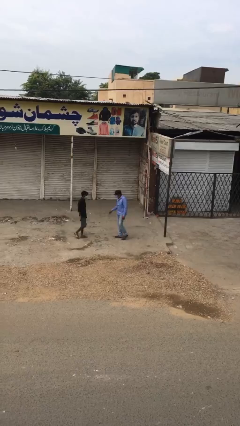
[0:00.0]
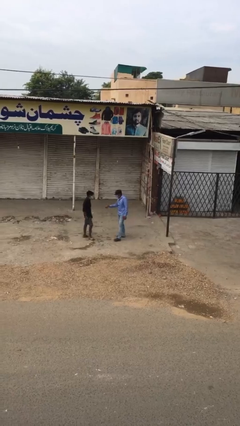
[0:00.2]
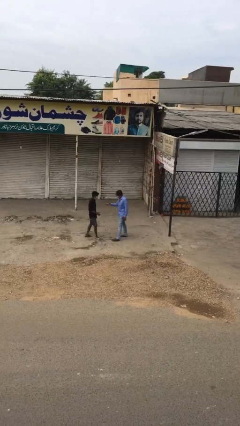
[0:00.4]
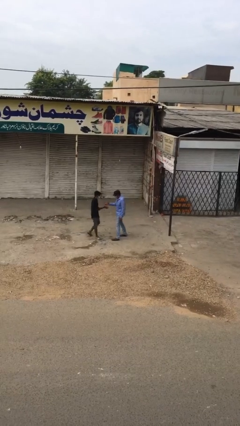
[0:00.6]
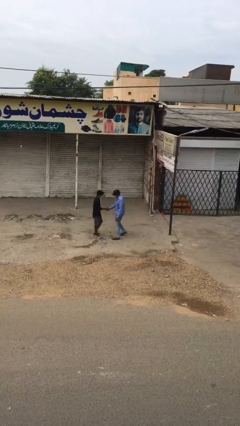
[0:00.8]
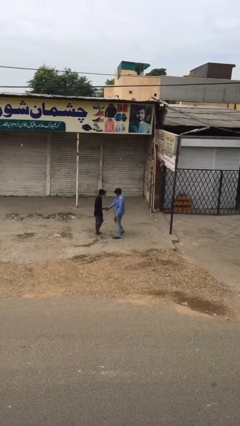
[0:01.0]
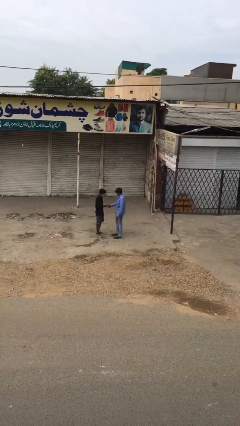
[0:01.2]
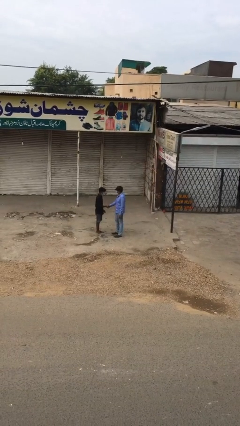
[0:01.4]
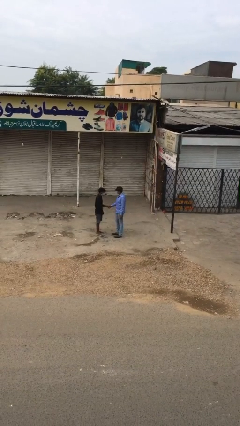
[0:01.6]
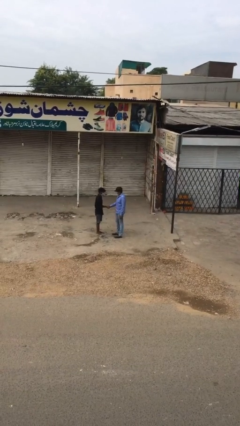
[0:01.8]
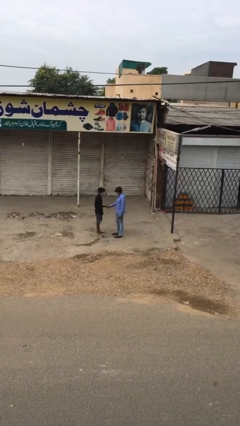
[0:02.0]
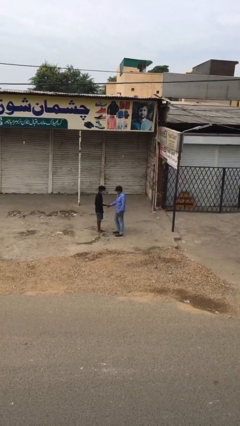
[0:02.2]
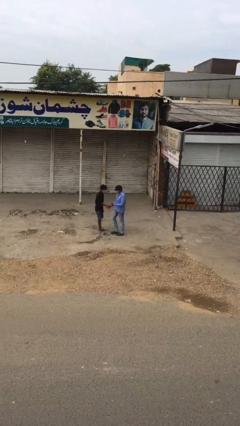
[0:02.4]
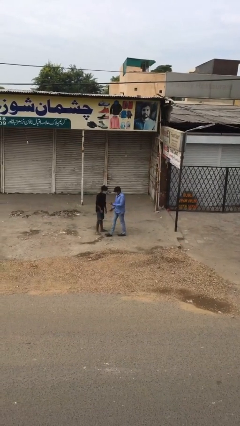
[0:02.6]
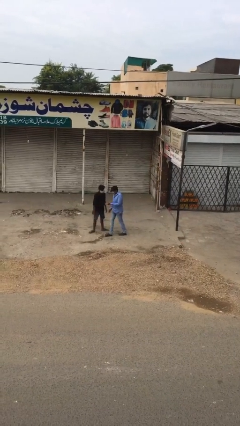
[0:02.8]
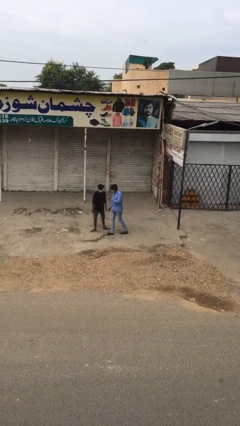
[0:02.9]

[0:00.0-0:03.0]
person shakes hand

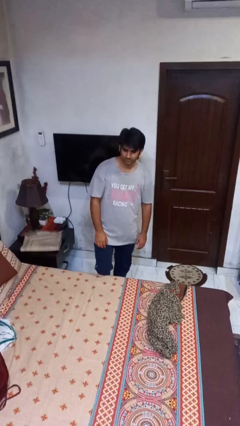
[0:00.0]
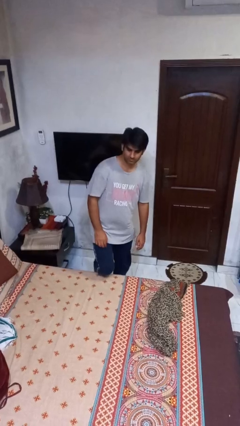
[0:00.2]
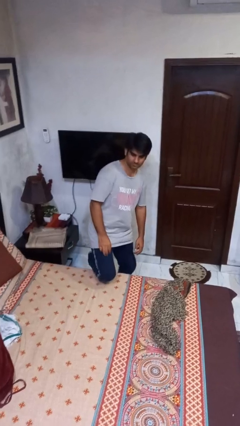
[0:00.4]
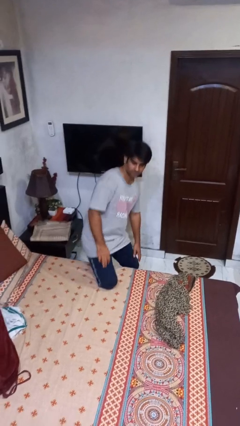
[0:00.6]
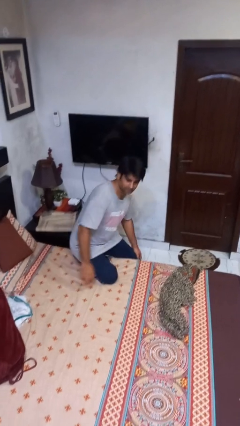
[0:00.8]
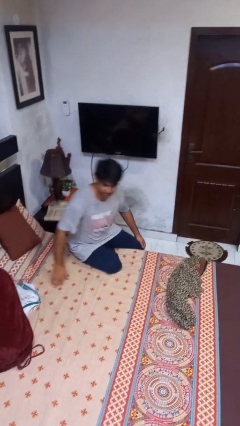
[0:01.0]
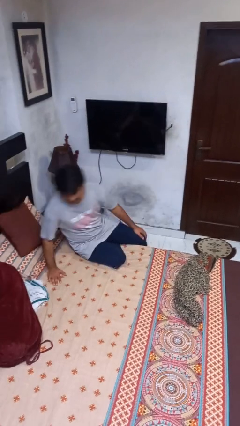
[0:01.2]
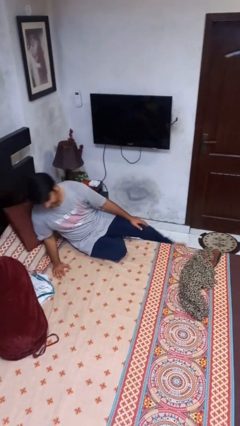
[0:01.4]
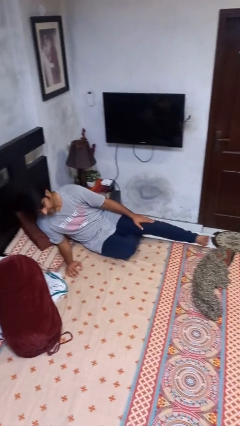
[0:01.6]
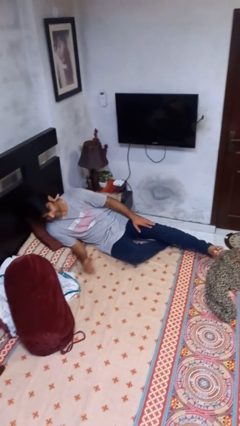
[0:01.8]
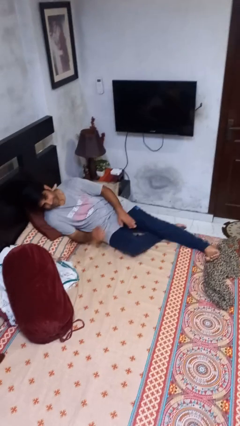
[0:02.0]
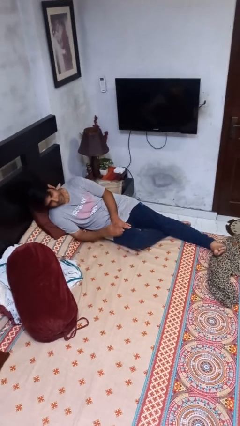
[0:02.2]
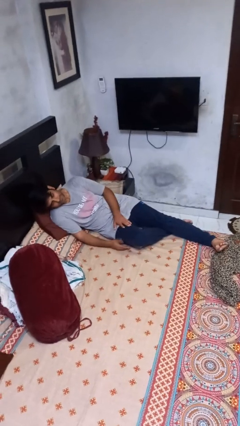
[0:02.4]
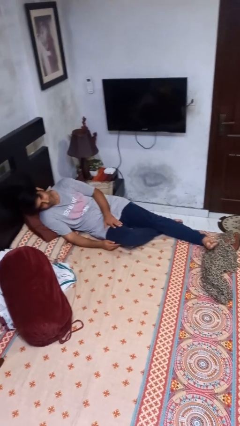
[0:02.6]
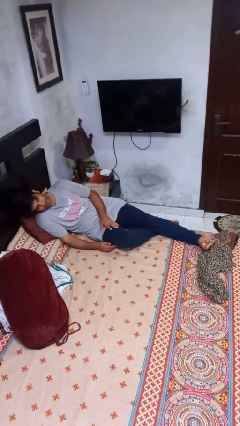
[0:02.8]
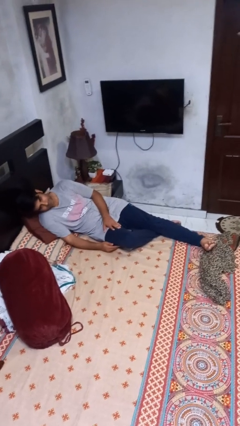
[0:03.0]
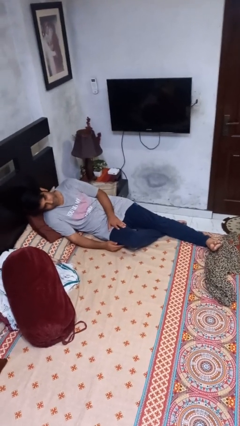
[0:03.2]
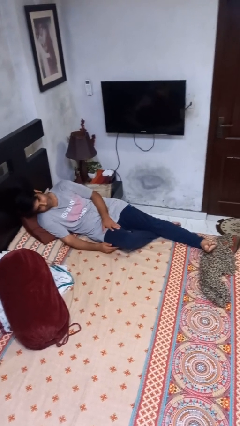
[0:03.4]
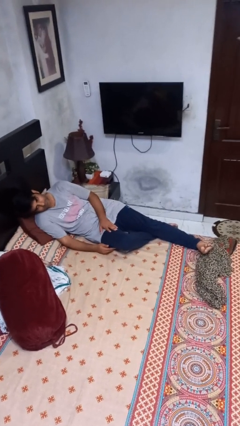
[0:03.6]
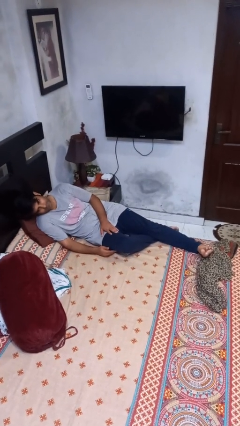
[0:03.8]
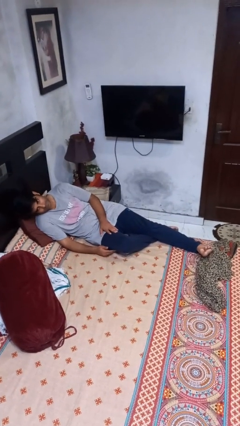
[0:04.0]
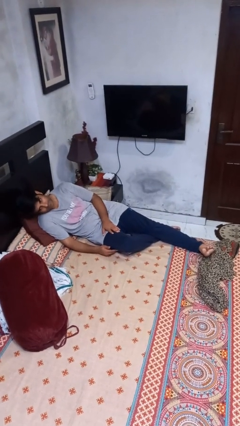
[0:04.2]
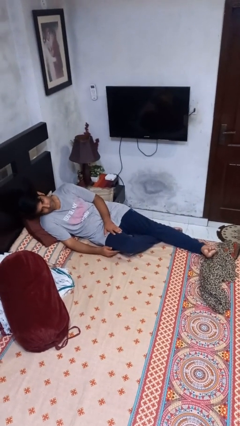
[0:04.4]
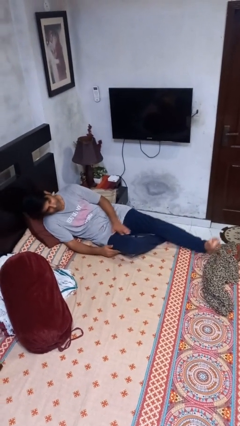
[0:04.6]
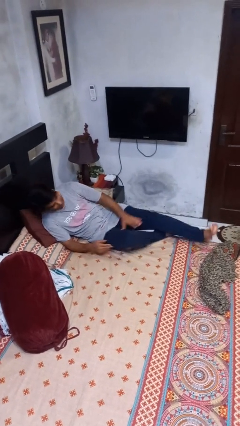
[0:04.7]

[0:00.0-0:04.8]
person lies down on bed

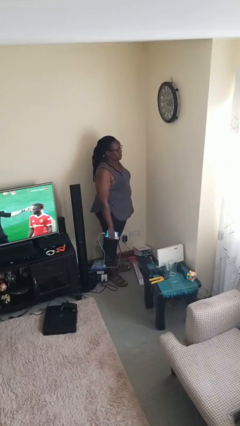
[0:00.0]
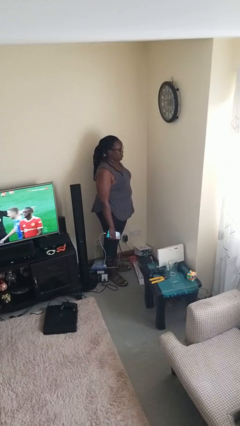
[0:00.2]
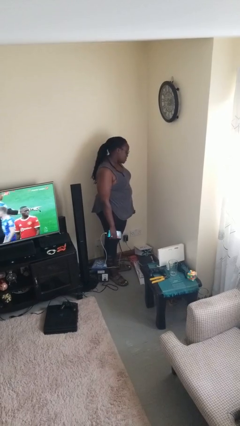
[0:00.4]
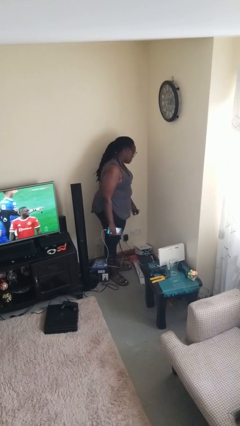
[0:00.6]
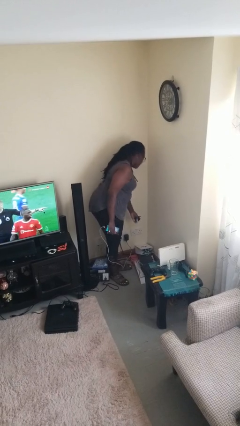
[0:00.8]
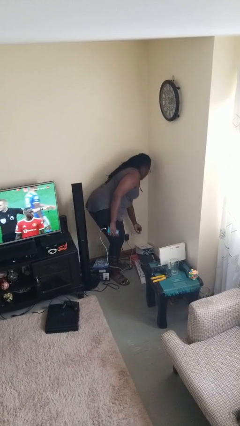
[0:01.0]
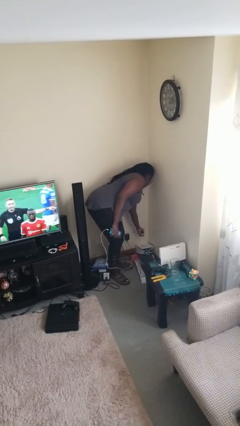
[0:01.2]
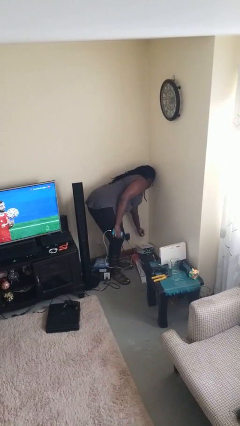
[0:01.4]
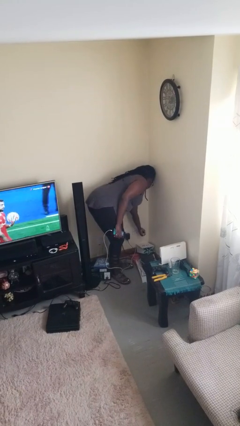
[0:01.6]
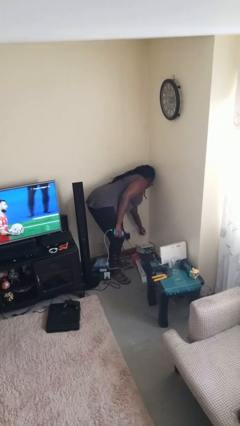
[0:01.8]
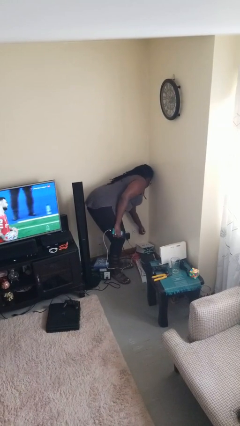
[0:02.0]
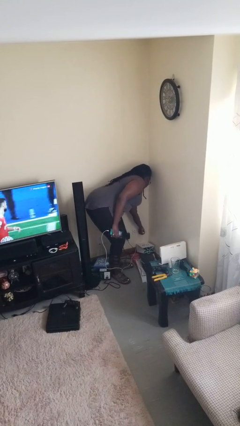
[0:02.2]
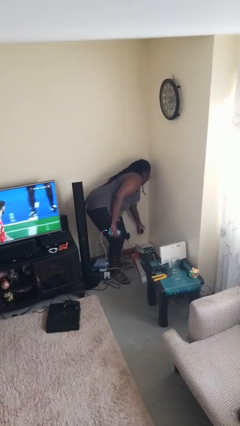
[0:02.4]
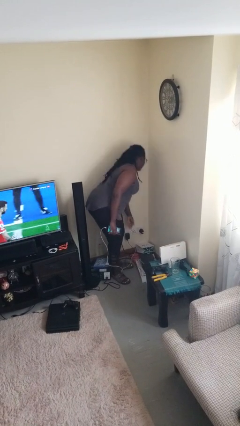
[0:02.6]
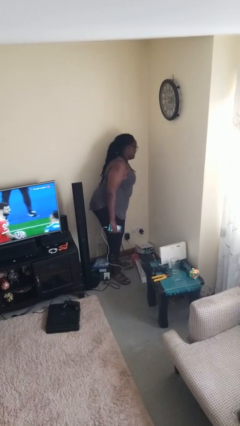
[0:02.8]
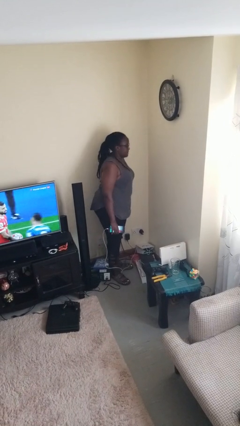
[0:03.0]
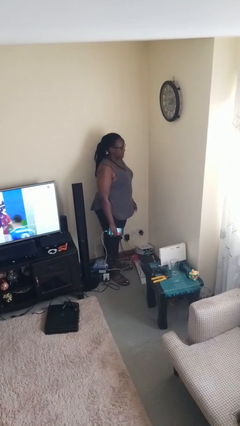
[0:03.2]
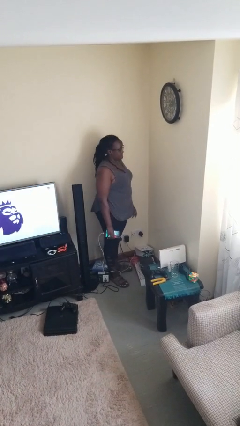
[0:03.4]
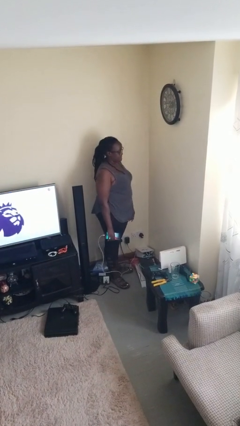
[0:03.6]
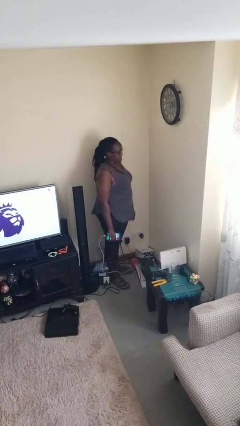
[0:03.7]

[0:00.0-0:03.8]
person plugs into electrical socket

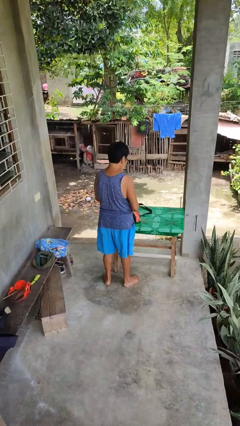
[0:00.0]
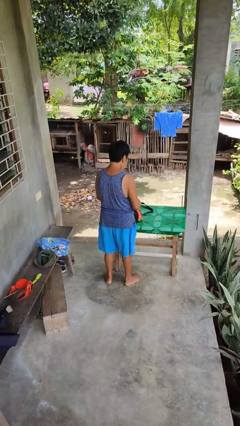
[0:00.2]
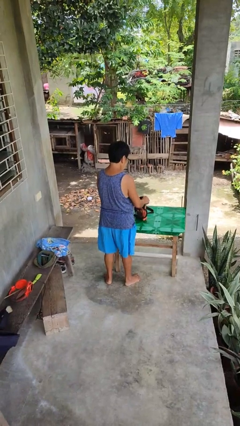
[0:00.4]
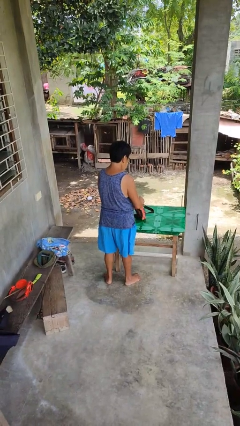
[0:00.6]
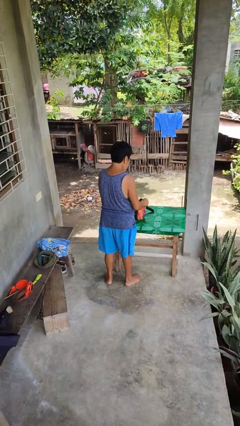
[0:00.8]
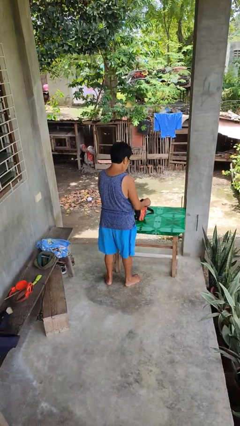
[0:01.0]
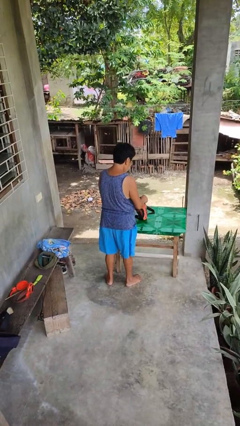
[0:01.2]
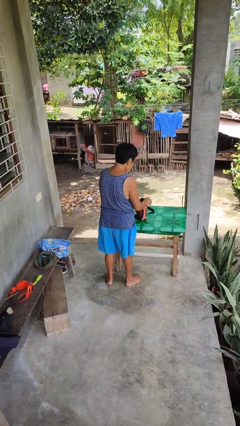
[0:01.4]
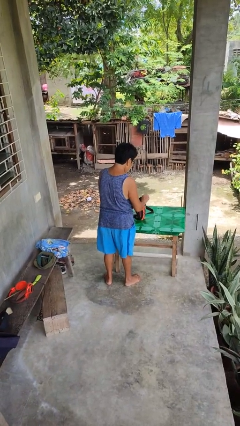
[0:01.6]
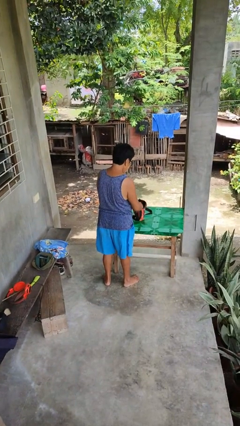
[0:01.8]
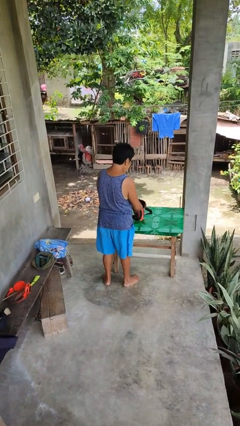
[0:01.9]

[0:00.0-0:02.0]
person searches in purse

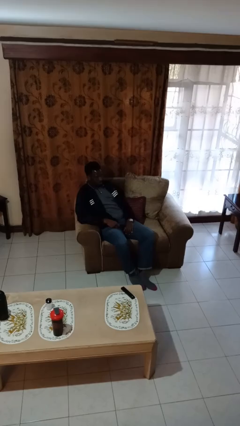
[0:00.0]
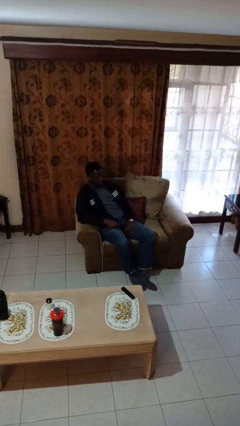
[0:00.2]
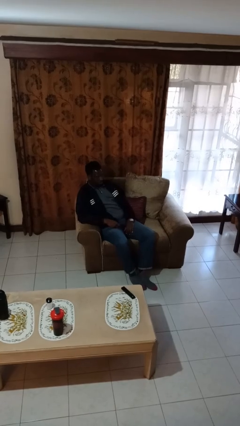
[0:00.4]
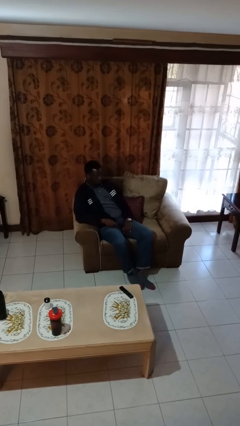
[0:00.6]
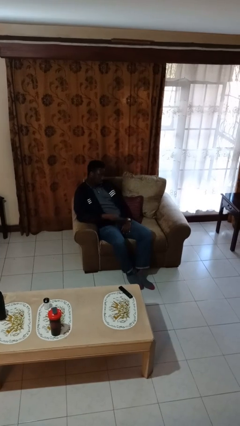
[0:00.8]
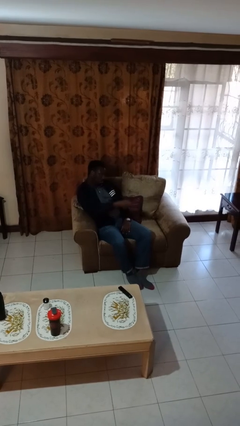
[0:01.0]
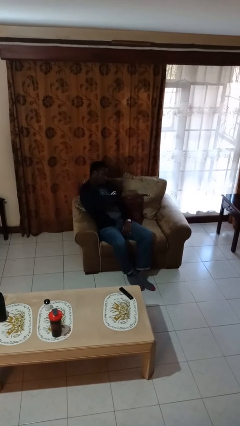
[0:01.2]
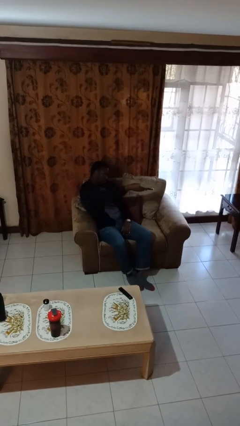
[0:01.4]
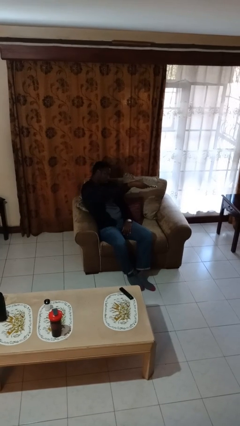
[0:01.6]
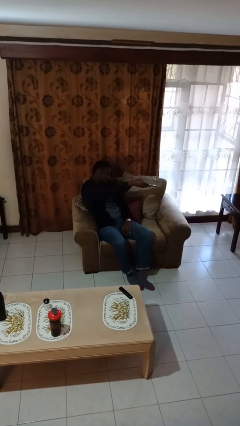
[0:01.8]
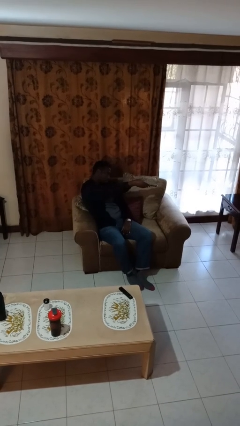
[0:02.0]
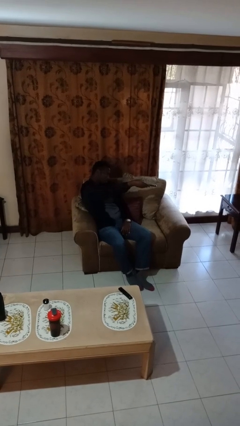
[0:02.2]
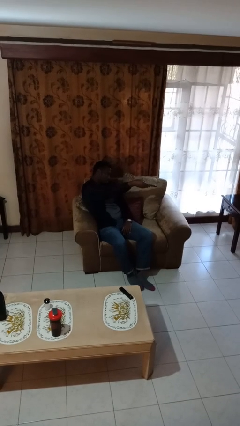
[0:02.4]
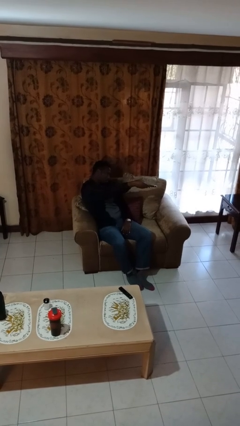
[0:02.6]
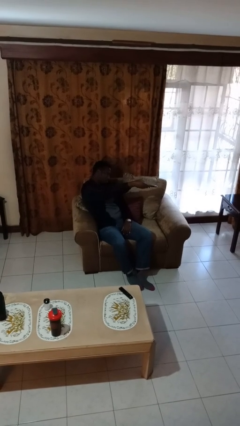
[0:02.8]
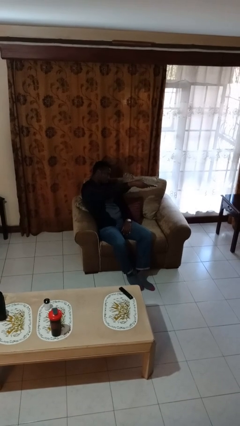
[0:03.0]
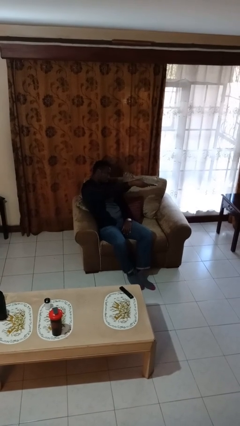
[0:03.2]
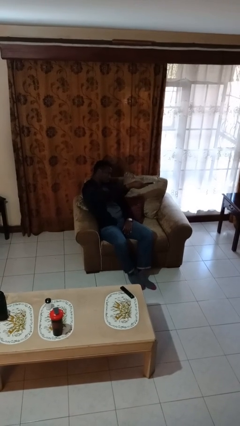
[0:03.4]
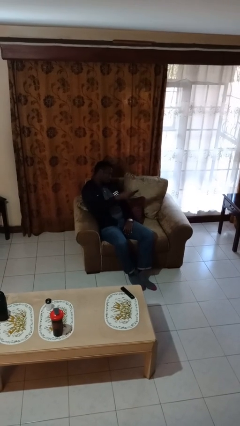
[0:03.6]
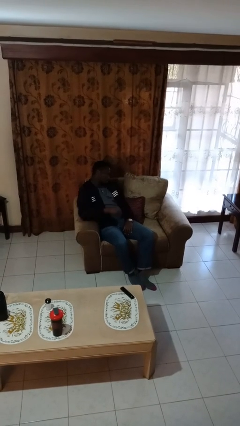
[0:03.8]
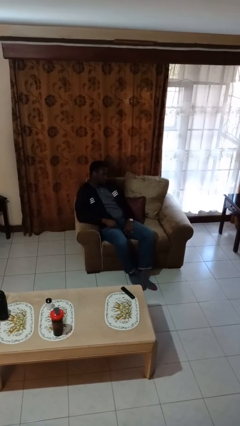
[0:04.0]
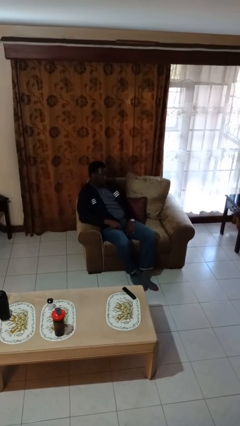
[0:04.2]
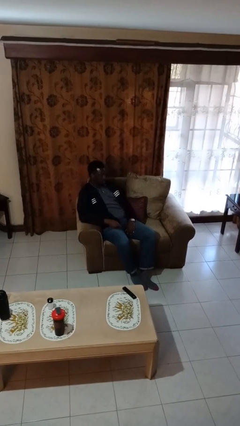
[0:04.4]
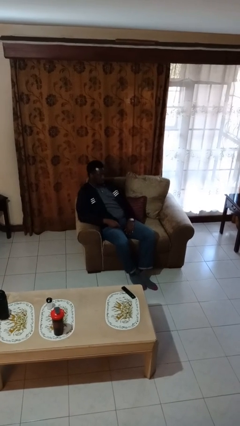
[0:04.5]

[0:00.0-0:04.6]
person uses television remote
